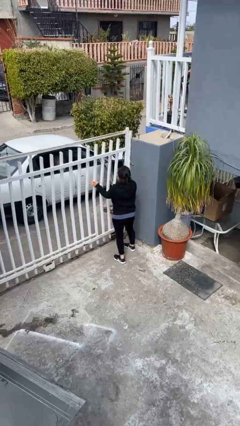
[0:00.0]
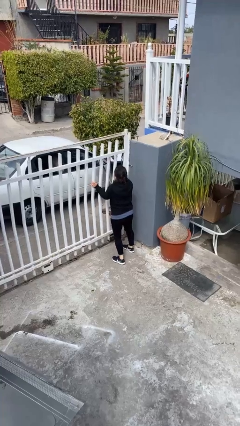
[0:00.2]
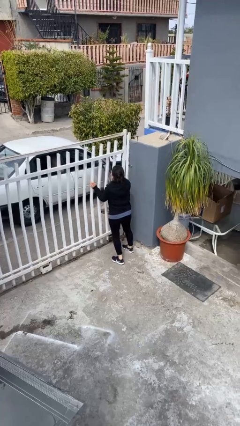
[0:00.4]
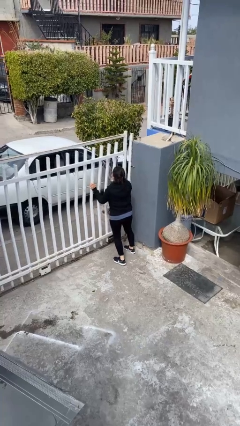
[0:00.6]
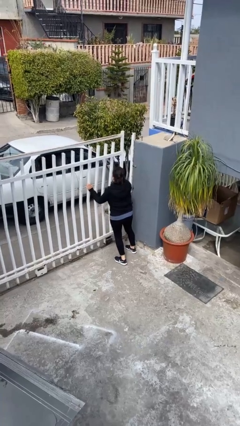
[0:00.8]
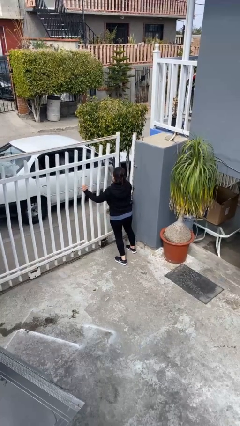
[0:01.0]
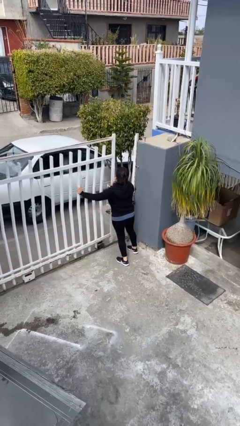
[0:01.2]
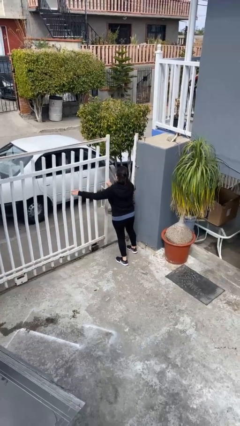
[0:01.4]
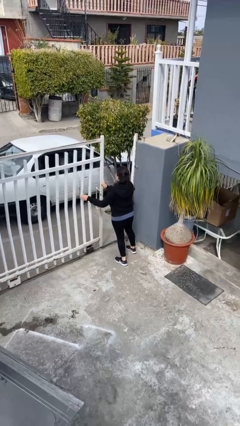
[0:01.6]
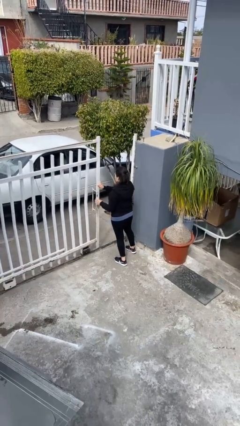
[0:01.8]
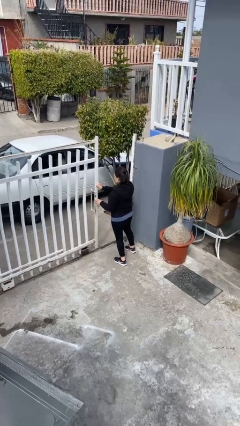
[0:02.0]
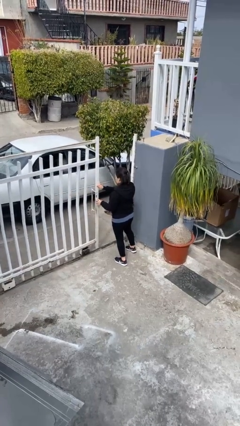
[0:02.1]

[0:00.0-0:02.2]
person opens facility door

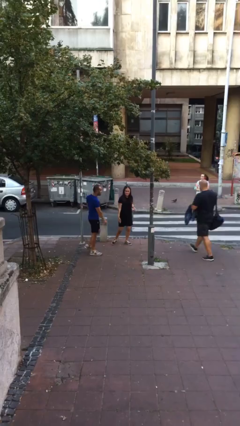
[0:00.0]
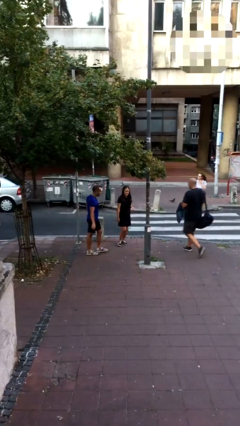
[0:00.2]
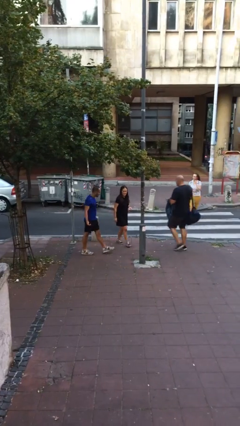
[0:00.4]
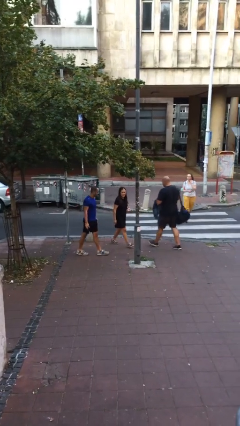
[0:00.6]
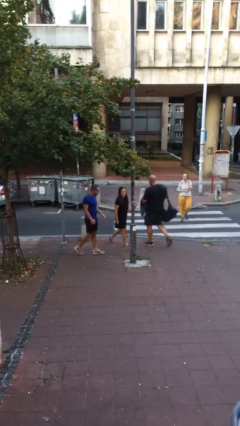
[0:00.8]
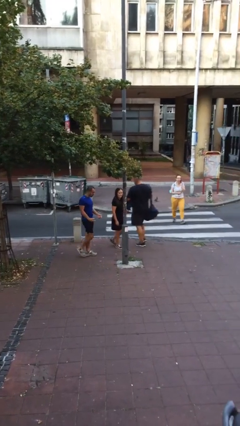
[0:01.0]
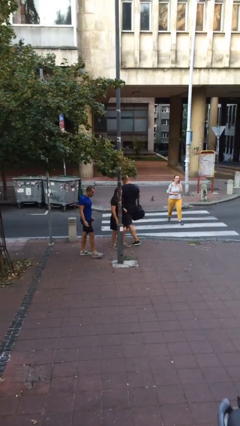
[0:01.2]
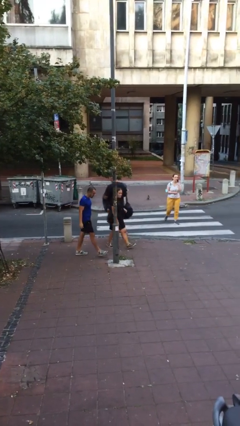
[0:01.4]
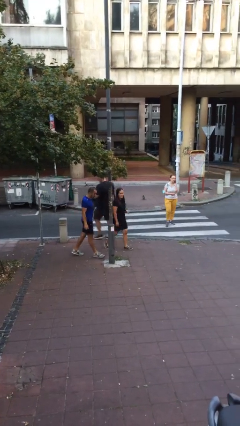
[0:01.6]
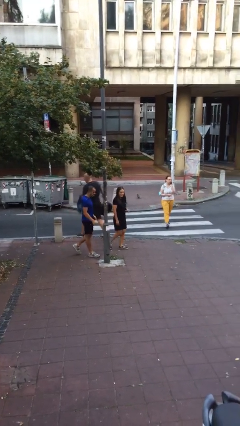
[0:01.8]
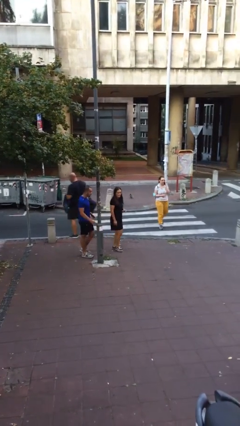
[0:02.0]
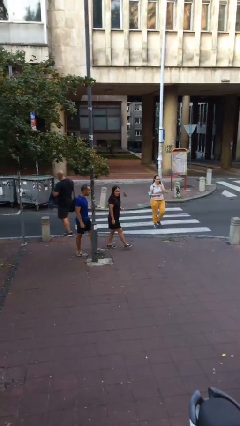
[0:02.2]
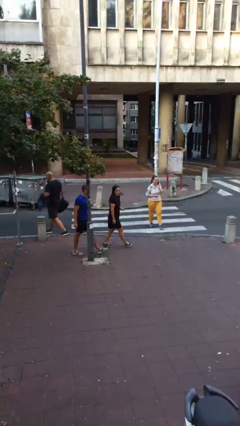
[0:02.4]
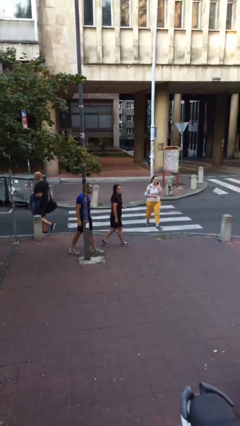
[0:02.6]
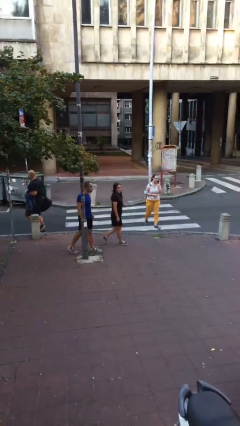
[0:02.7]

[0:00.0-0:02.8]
person talks to person

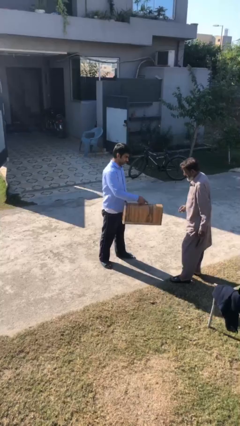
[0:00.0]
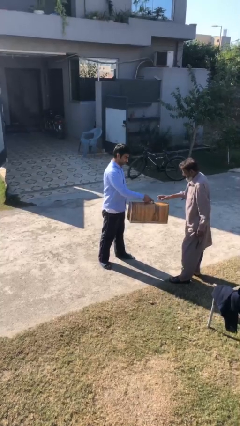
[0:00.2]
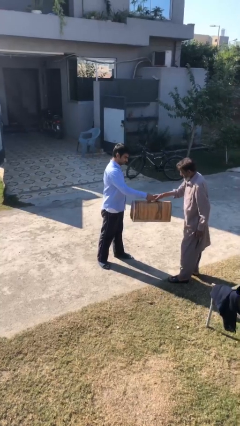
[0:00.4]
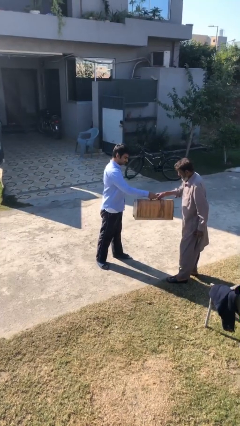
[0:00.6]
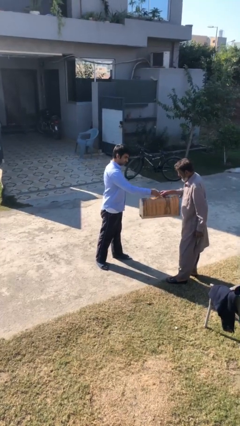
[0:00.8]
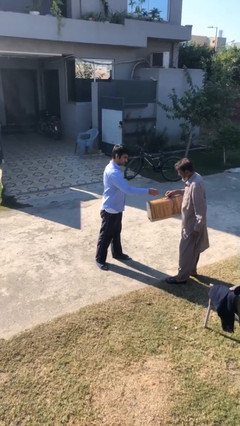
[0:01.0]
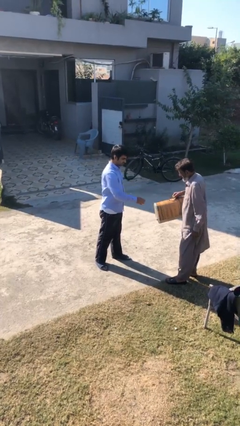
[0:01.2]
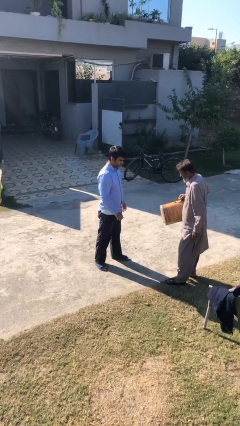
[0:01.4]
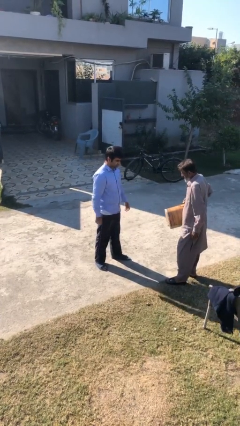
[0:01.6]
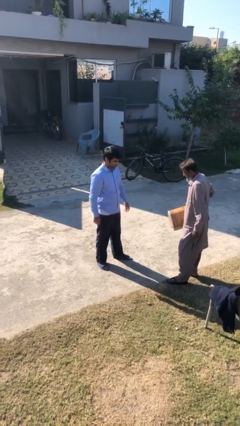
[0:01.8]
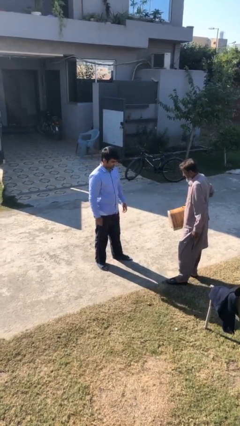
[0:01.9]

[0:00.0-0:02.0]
person transfers object to person

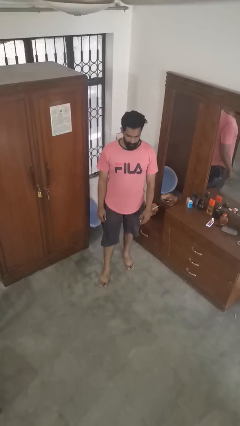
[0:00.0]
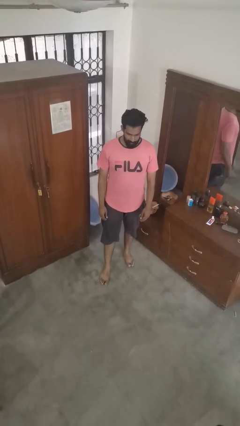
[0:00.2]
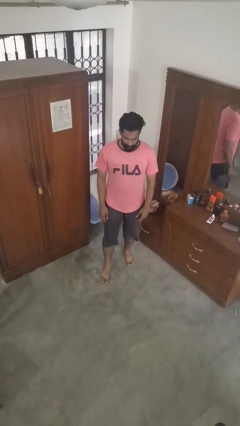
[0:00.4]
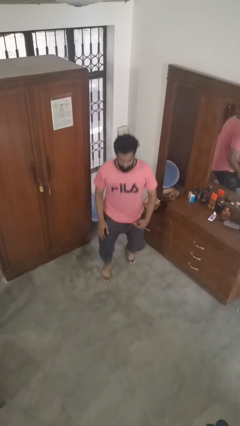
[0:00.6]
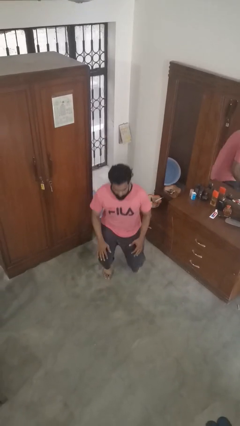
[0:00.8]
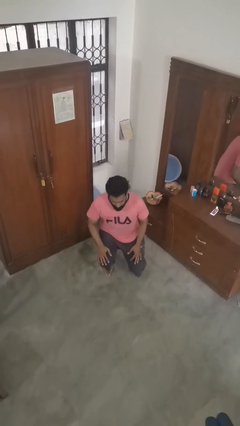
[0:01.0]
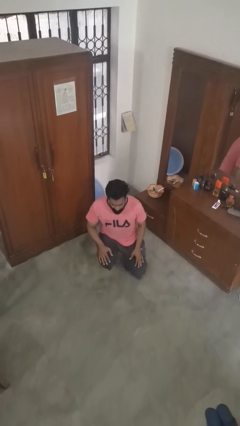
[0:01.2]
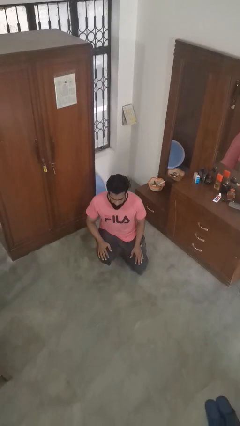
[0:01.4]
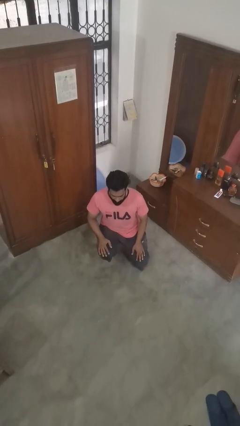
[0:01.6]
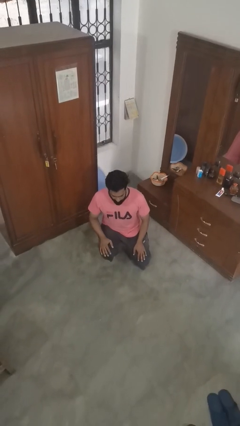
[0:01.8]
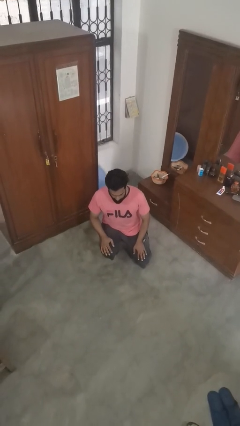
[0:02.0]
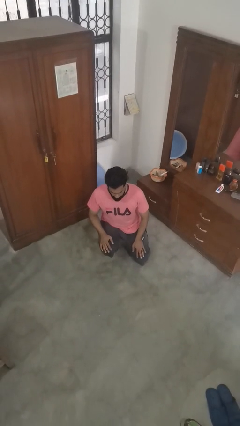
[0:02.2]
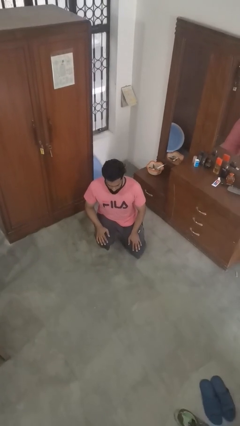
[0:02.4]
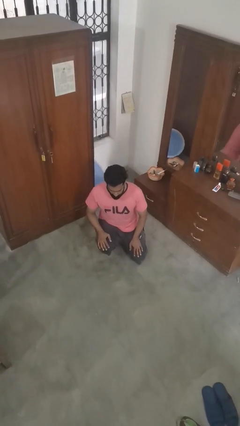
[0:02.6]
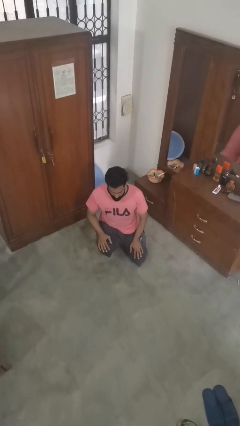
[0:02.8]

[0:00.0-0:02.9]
person kneels

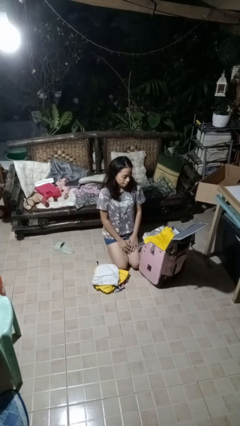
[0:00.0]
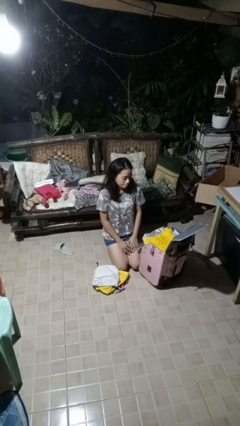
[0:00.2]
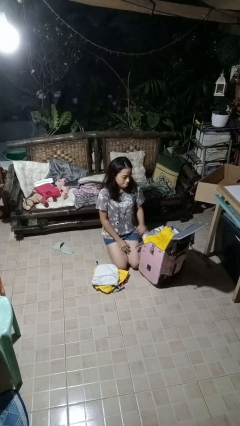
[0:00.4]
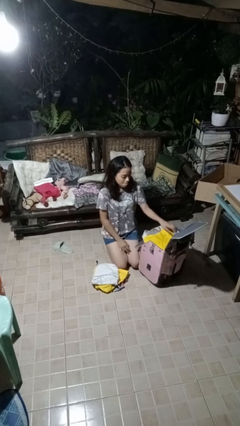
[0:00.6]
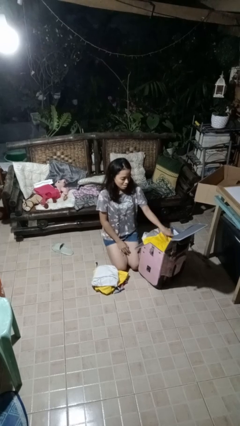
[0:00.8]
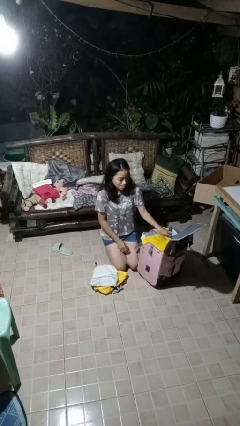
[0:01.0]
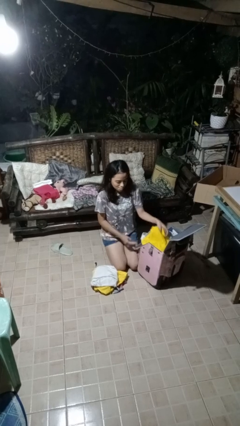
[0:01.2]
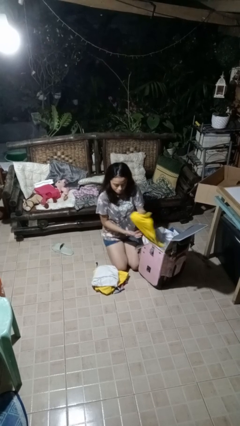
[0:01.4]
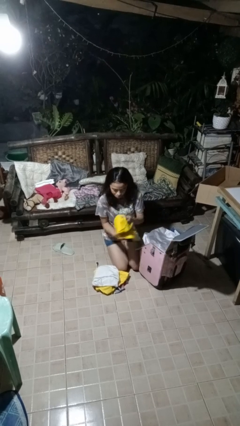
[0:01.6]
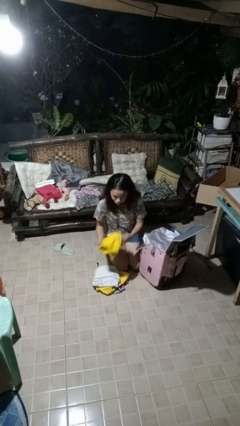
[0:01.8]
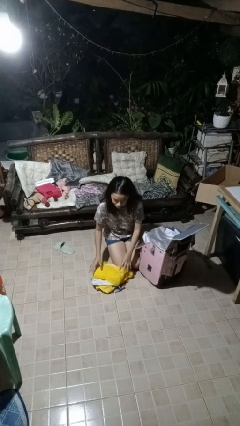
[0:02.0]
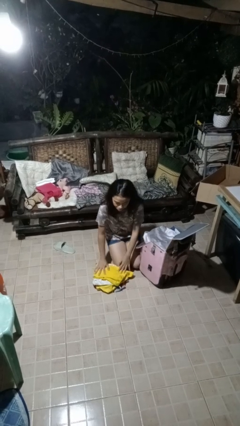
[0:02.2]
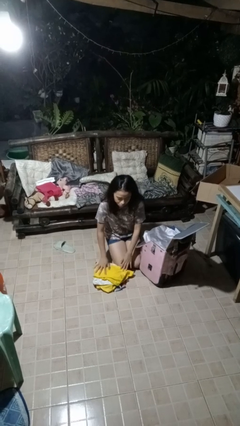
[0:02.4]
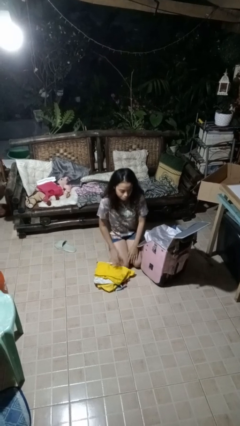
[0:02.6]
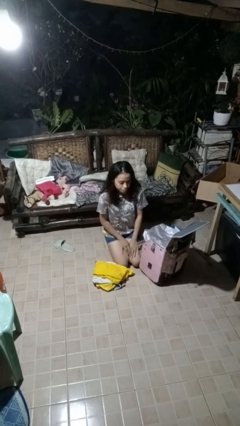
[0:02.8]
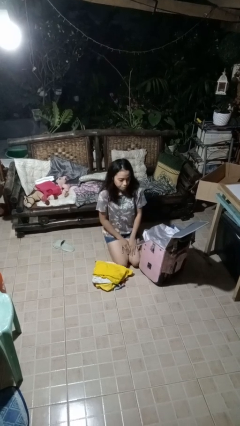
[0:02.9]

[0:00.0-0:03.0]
person unloads clothes from suitcase

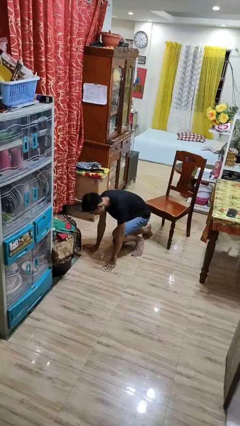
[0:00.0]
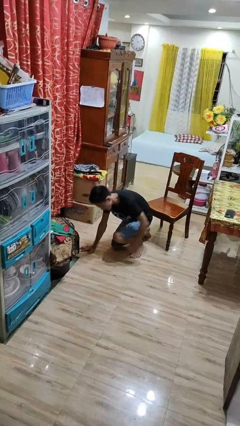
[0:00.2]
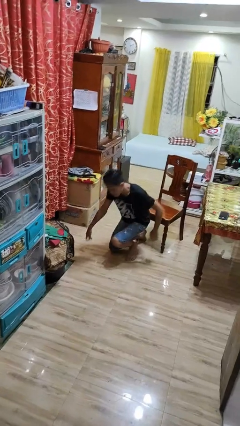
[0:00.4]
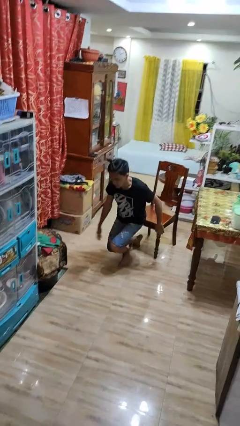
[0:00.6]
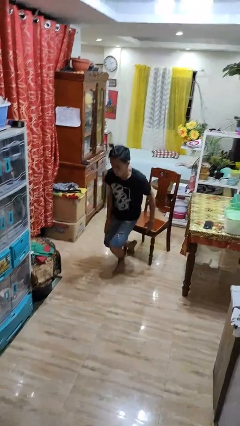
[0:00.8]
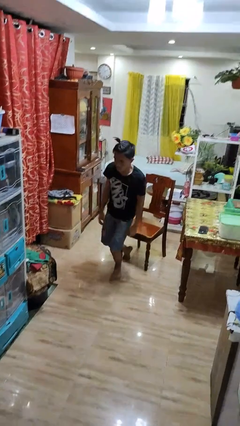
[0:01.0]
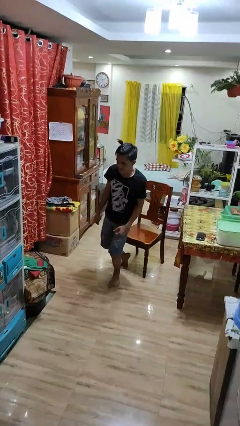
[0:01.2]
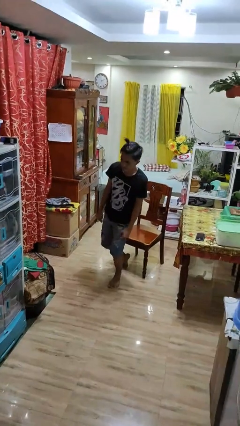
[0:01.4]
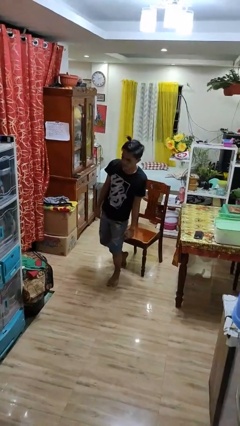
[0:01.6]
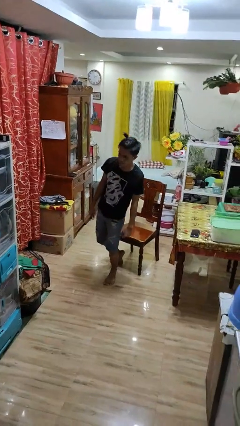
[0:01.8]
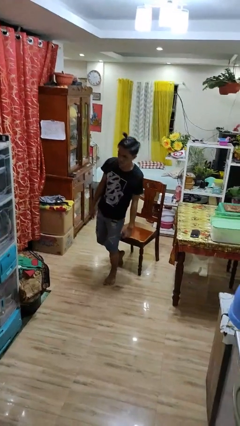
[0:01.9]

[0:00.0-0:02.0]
person stands up from floor

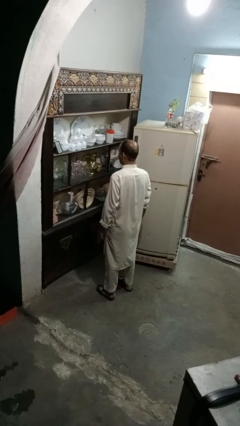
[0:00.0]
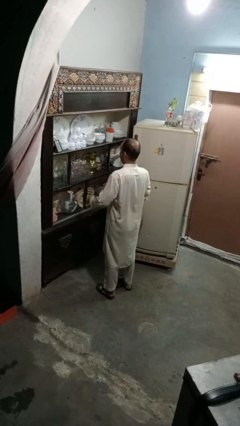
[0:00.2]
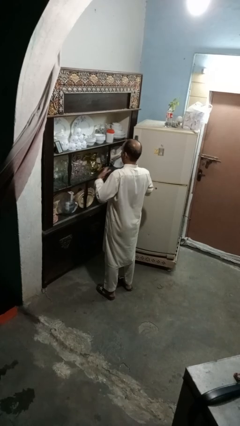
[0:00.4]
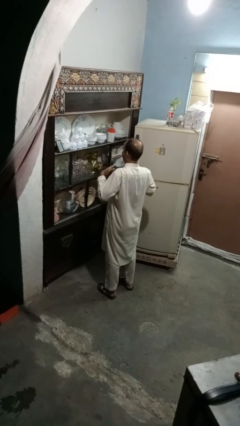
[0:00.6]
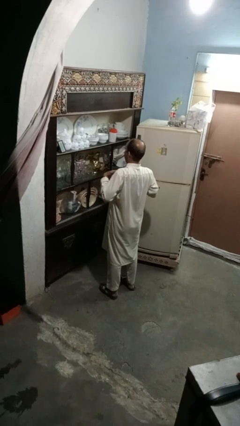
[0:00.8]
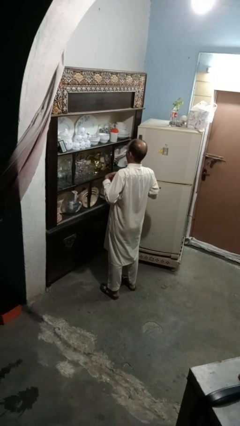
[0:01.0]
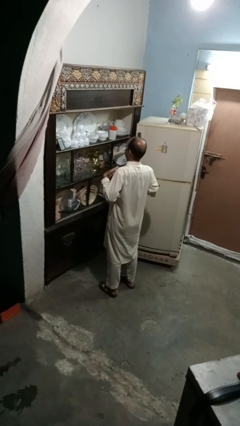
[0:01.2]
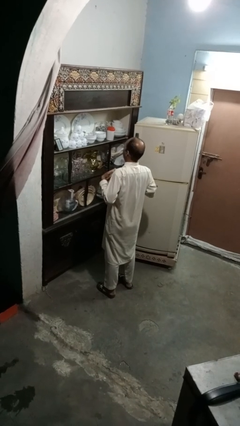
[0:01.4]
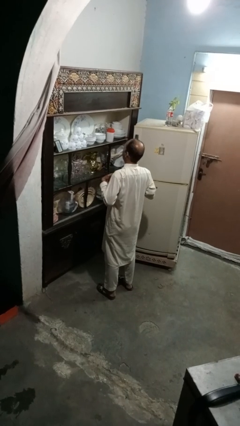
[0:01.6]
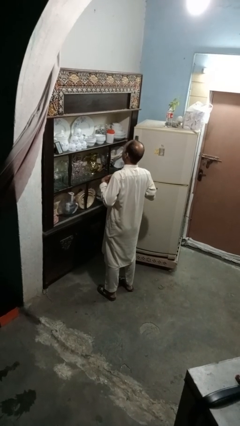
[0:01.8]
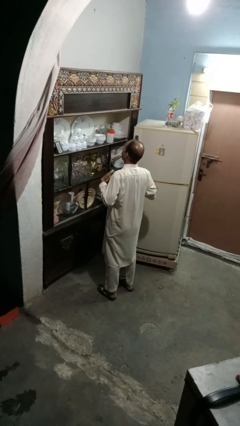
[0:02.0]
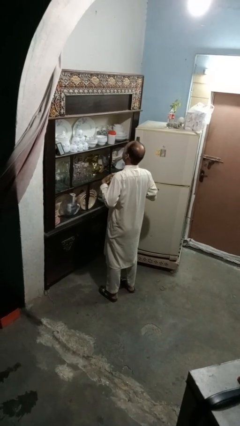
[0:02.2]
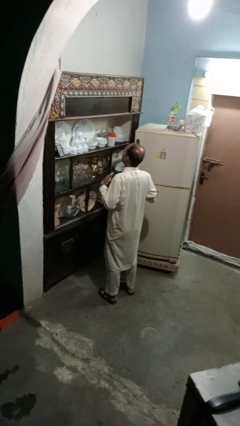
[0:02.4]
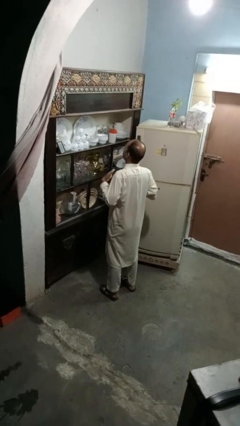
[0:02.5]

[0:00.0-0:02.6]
person drums on chest
